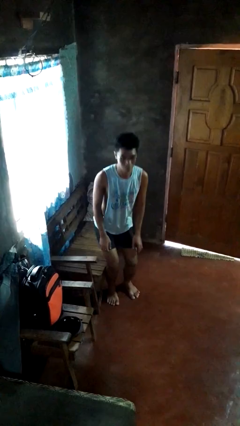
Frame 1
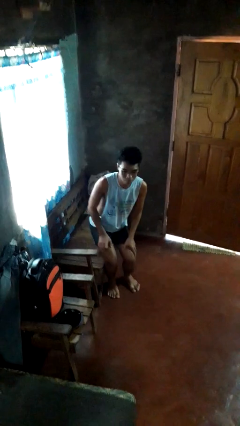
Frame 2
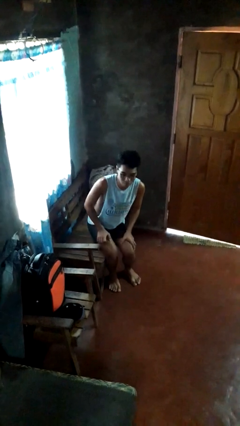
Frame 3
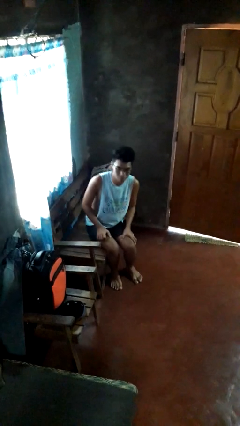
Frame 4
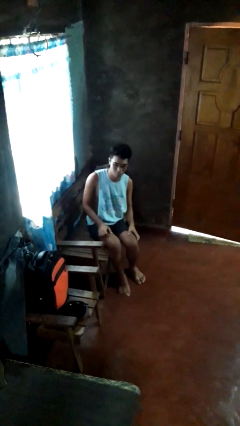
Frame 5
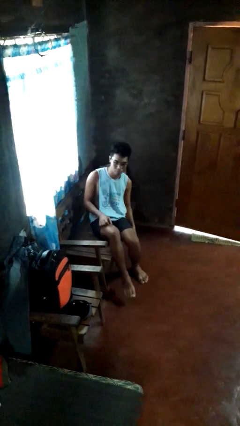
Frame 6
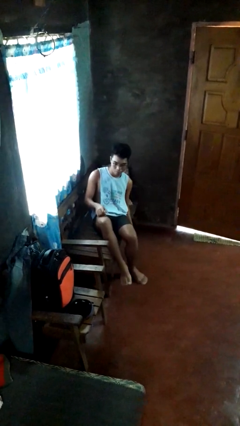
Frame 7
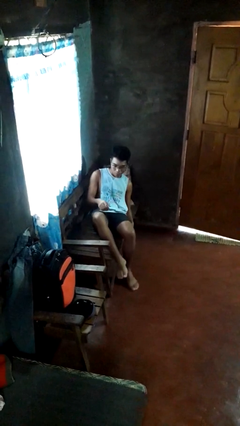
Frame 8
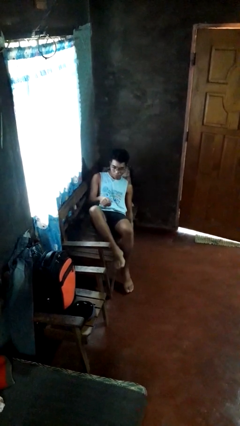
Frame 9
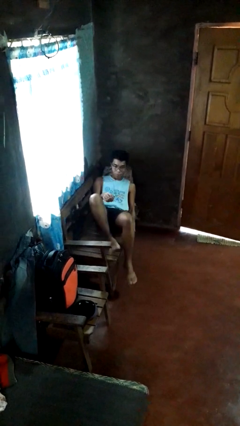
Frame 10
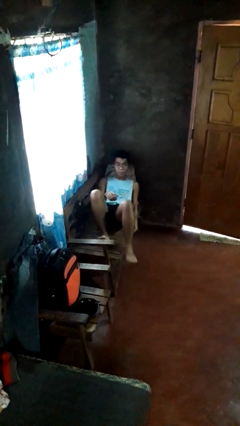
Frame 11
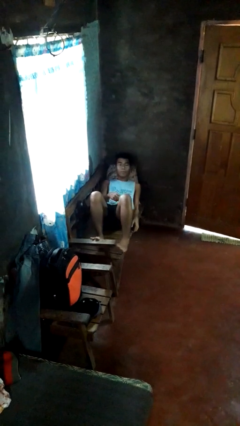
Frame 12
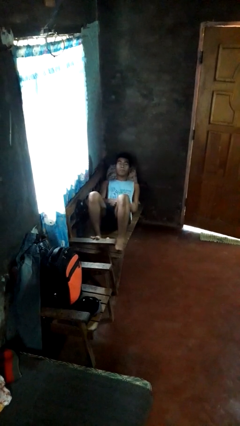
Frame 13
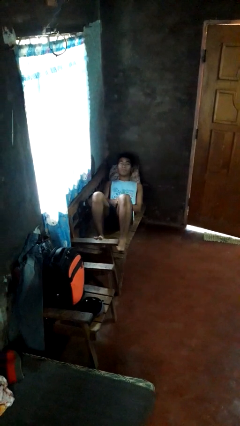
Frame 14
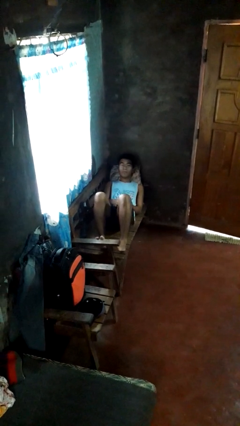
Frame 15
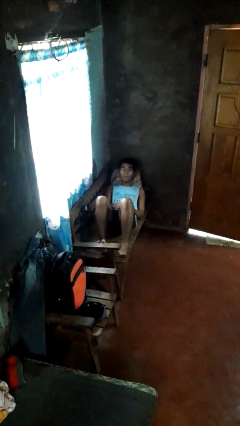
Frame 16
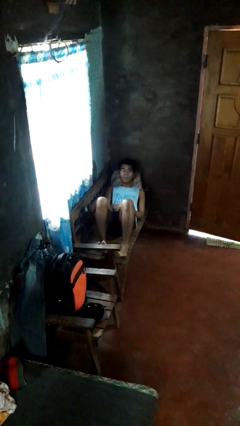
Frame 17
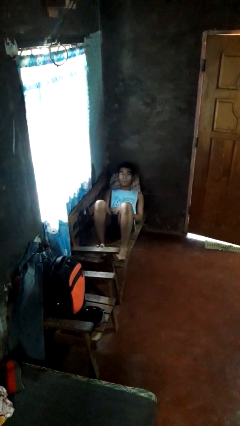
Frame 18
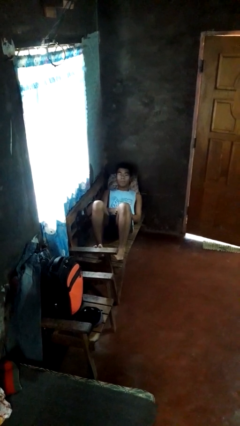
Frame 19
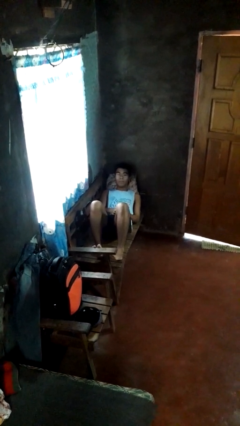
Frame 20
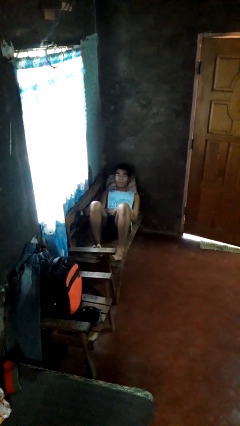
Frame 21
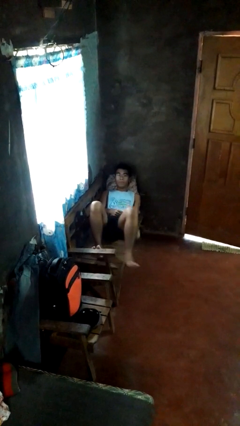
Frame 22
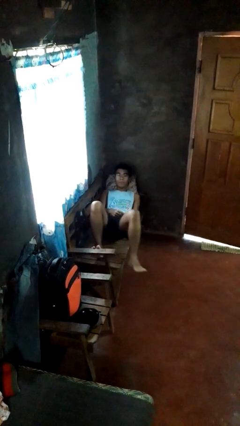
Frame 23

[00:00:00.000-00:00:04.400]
person lies down on couch

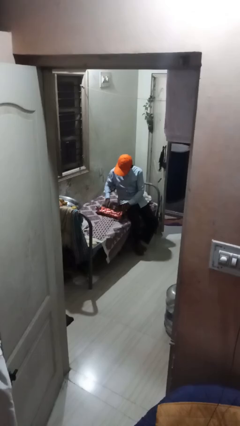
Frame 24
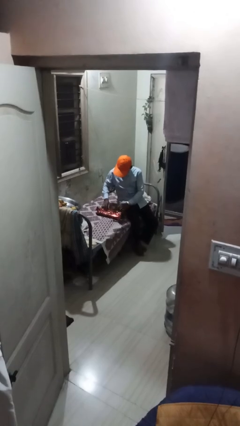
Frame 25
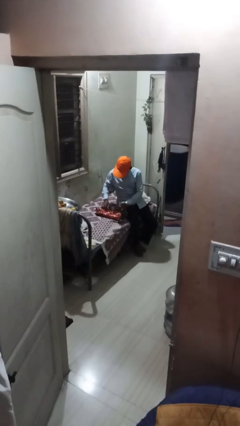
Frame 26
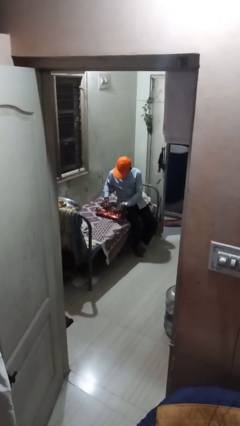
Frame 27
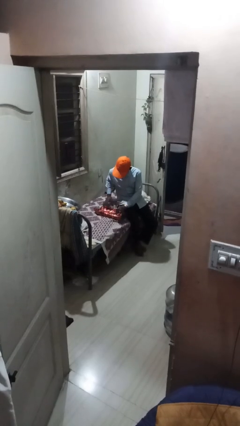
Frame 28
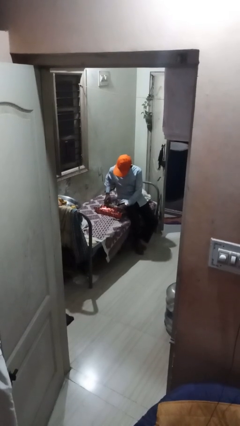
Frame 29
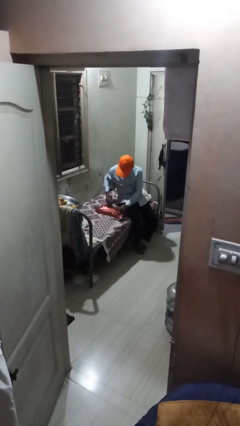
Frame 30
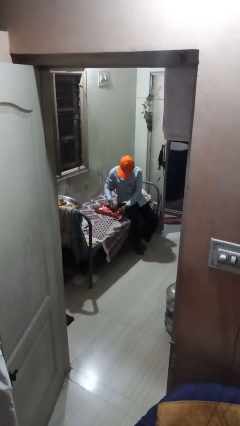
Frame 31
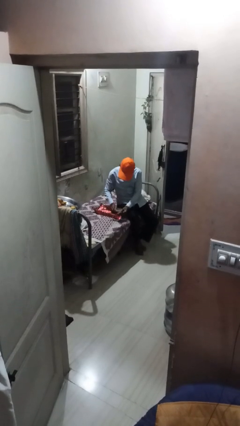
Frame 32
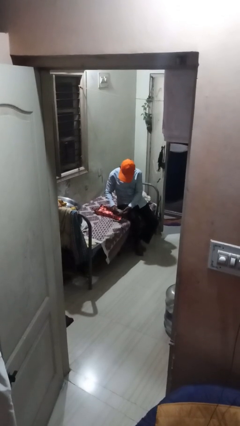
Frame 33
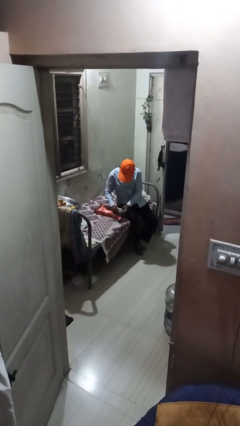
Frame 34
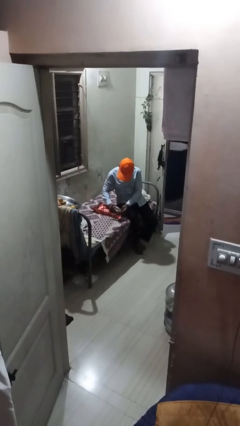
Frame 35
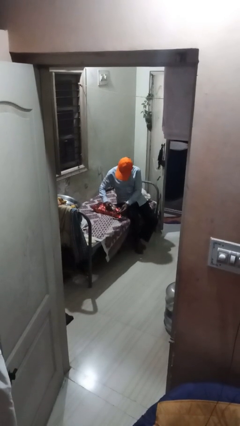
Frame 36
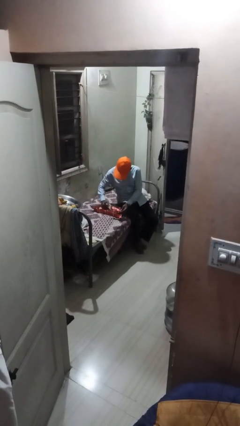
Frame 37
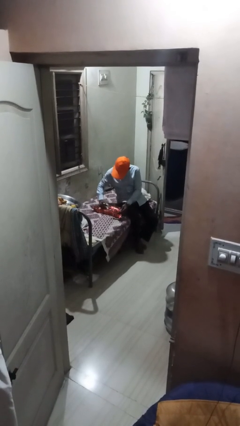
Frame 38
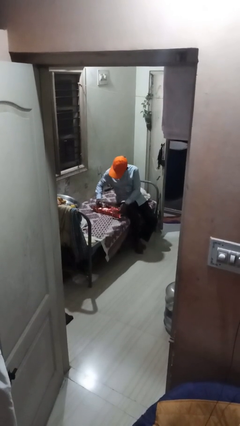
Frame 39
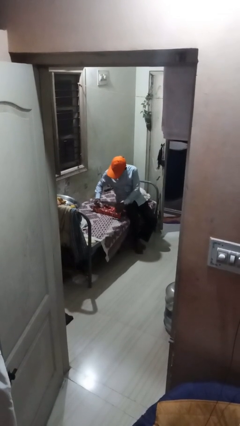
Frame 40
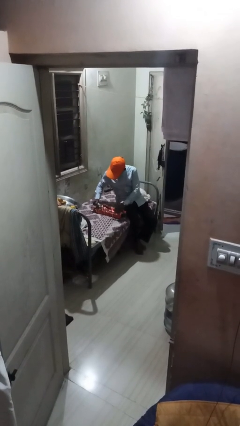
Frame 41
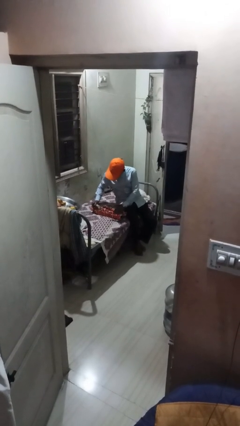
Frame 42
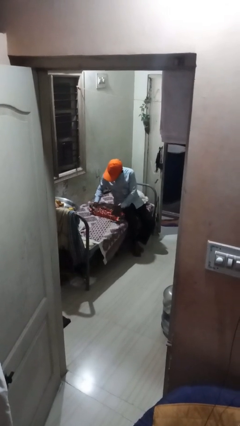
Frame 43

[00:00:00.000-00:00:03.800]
person wraps box

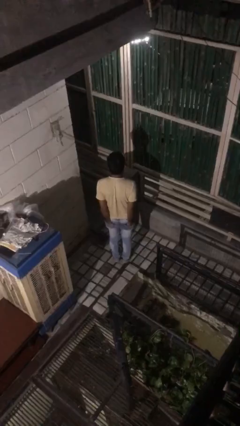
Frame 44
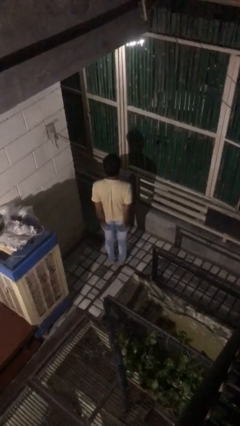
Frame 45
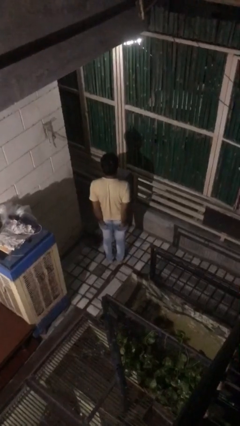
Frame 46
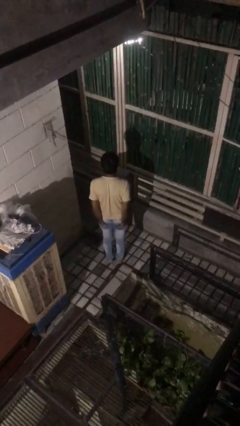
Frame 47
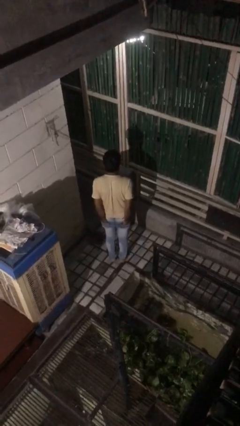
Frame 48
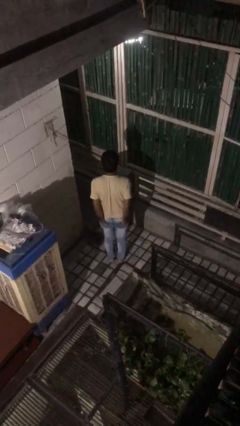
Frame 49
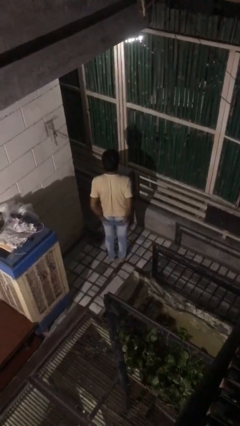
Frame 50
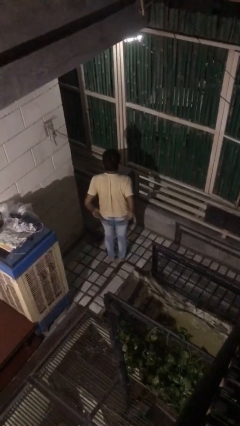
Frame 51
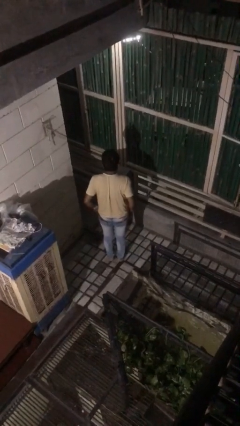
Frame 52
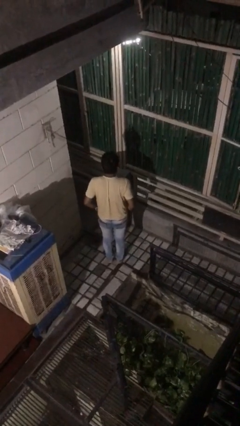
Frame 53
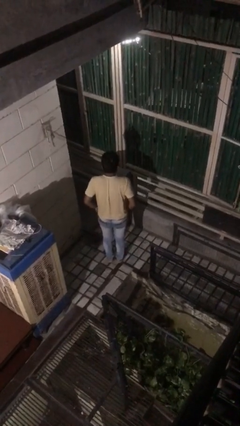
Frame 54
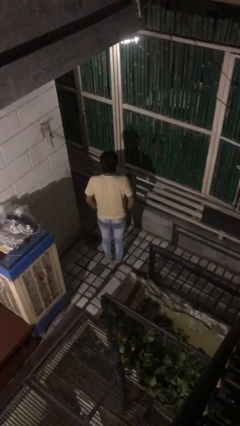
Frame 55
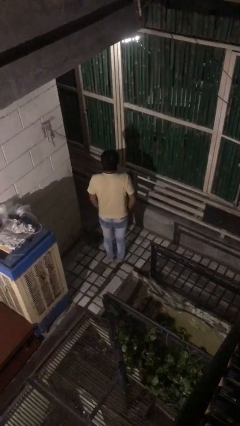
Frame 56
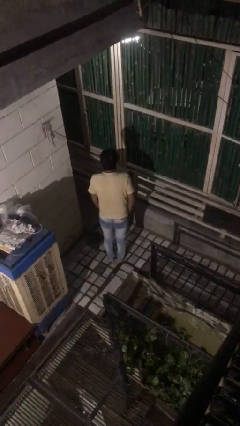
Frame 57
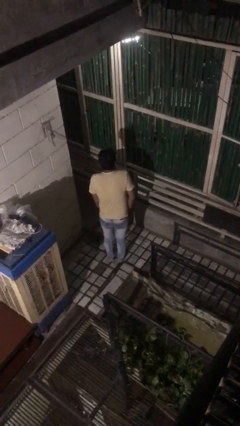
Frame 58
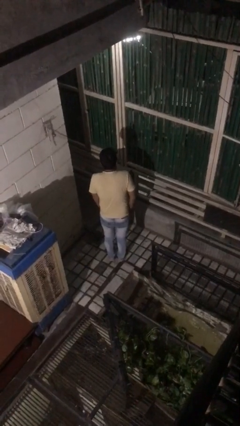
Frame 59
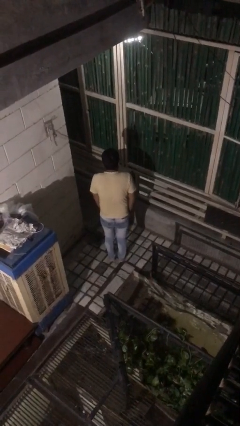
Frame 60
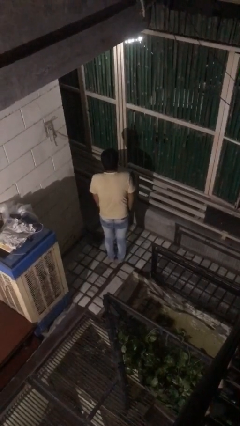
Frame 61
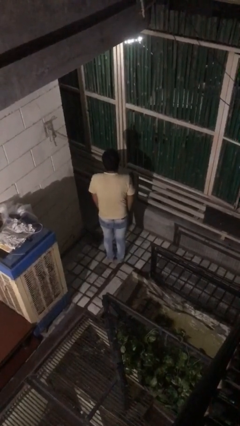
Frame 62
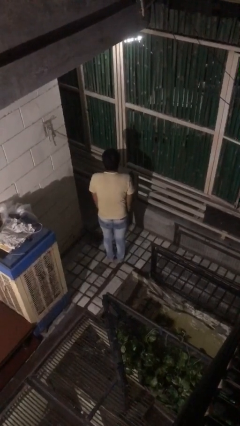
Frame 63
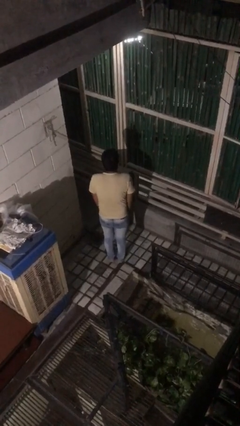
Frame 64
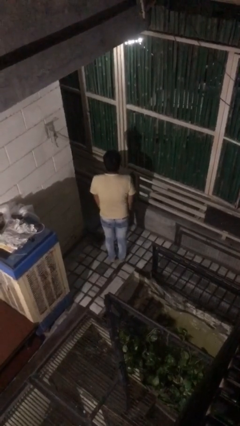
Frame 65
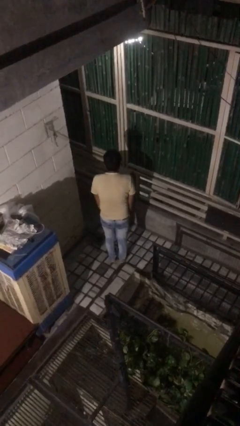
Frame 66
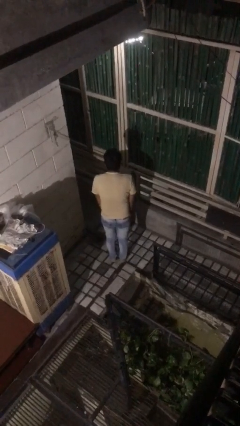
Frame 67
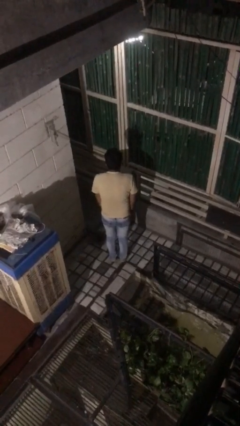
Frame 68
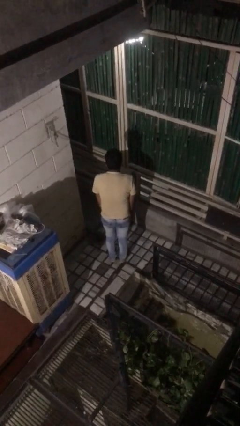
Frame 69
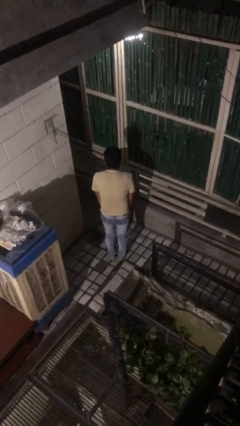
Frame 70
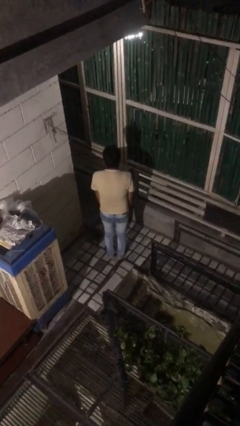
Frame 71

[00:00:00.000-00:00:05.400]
person puts hands in back pockets

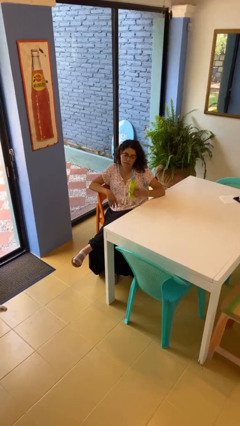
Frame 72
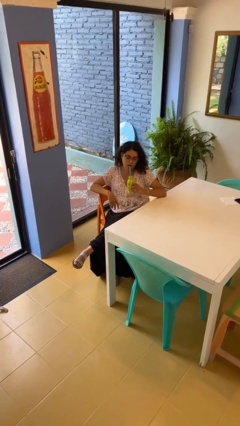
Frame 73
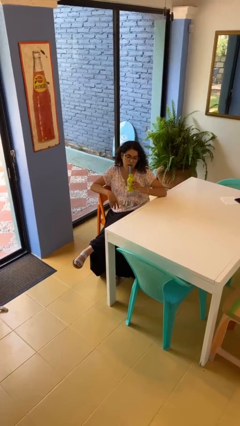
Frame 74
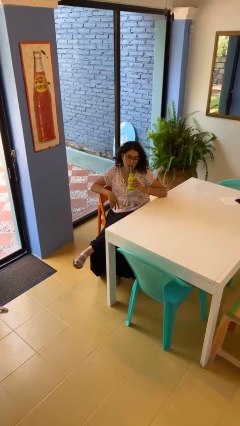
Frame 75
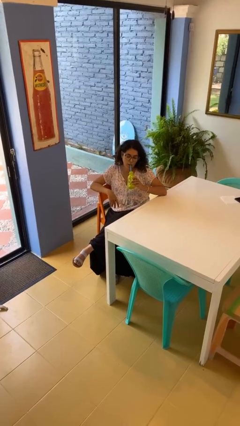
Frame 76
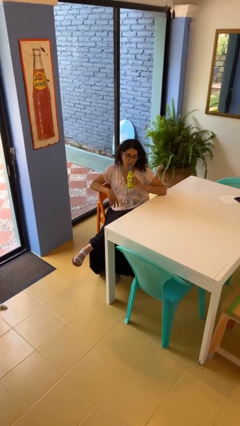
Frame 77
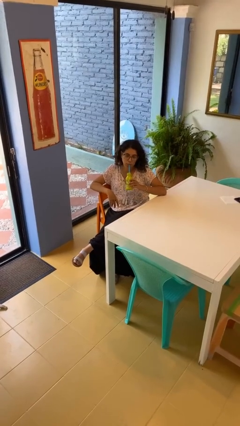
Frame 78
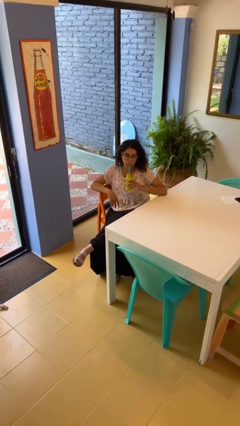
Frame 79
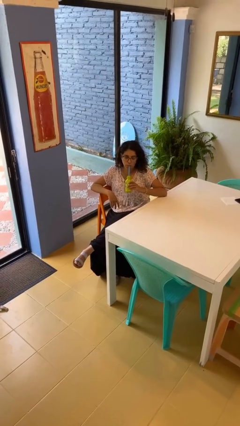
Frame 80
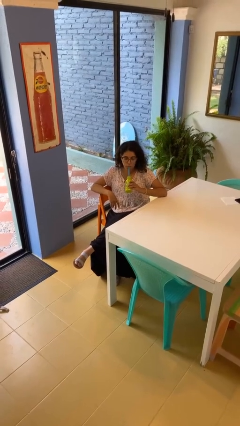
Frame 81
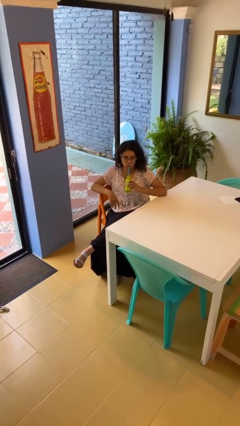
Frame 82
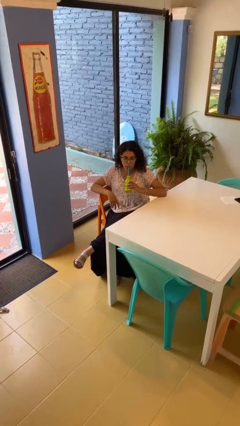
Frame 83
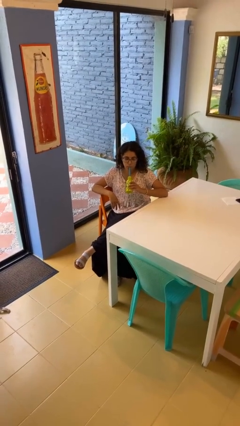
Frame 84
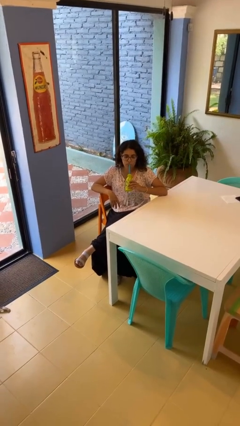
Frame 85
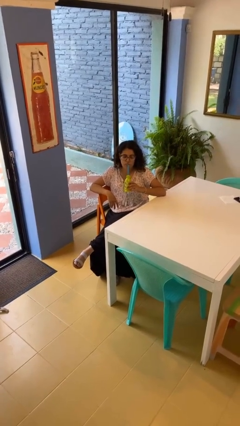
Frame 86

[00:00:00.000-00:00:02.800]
person drinks from straw

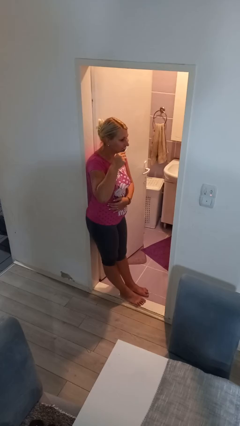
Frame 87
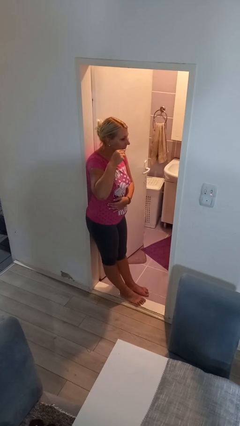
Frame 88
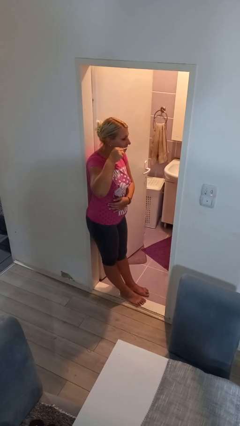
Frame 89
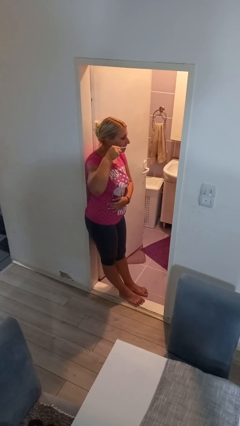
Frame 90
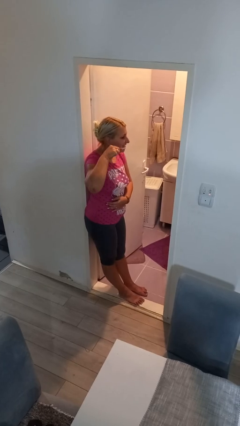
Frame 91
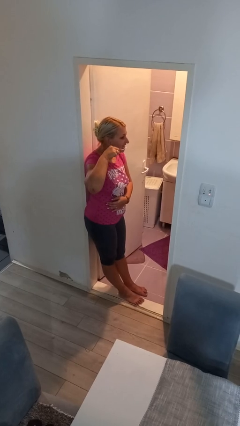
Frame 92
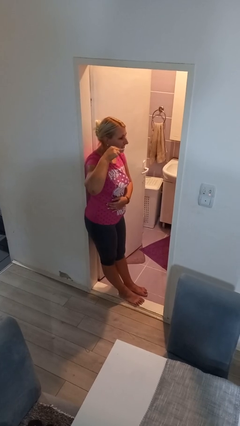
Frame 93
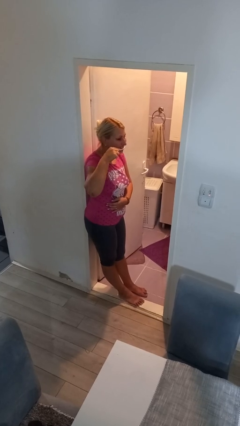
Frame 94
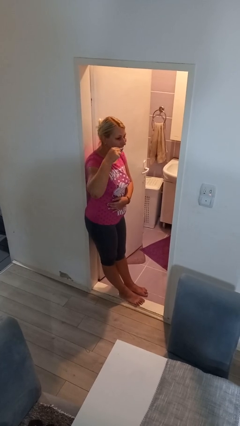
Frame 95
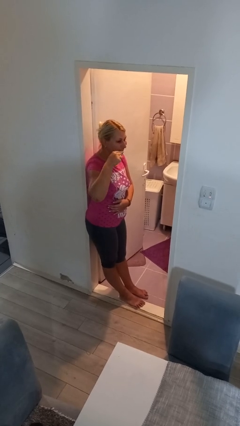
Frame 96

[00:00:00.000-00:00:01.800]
person brushes teeth
